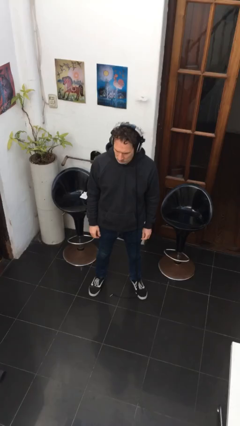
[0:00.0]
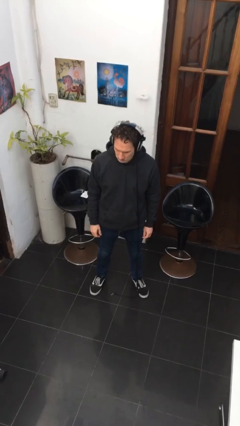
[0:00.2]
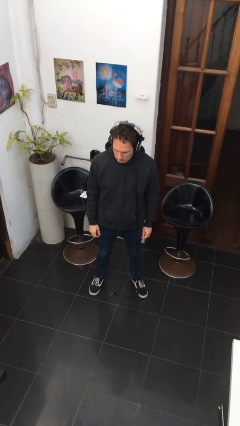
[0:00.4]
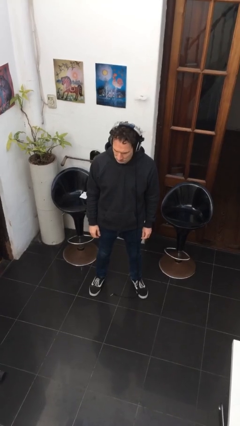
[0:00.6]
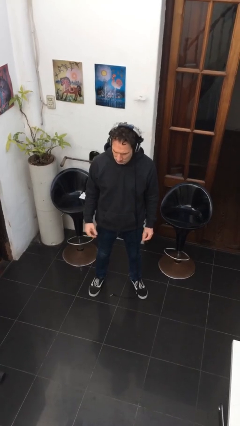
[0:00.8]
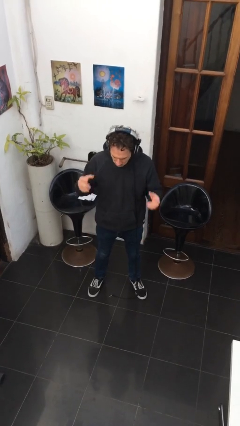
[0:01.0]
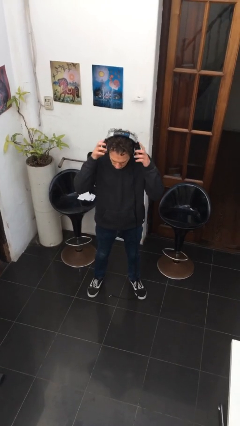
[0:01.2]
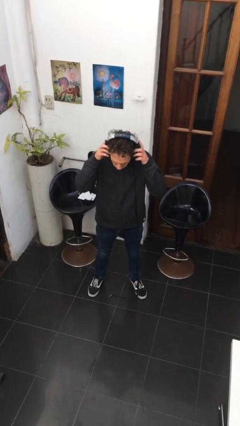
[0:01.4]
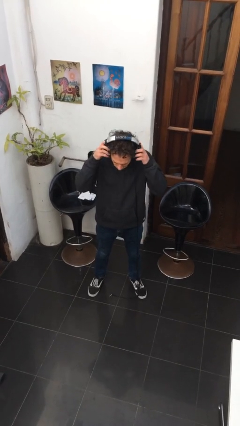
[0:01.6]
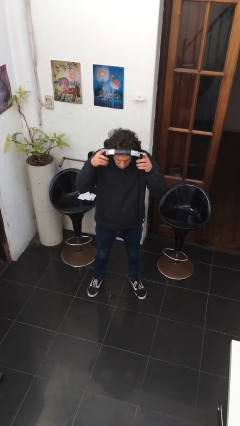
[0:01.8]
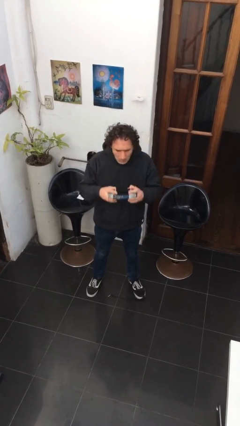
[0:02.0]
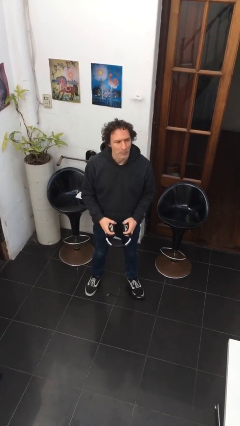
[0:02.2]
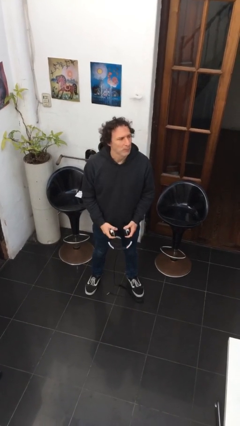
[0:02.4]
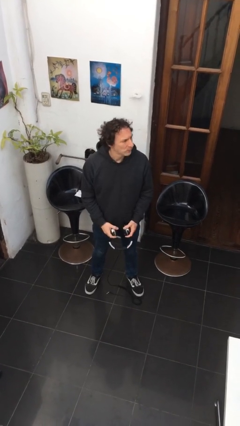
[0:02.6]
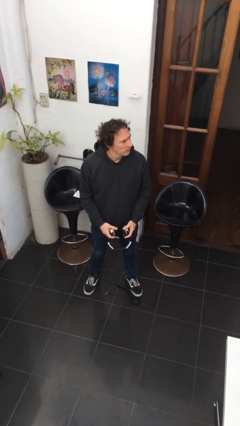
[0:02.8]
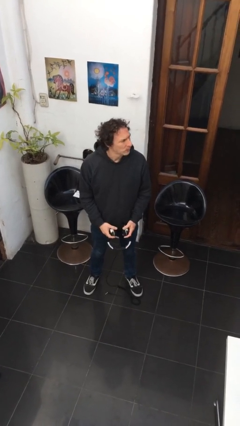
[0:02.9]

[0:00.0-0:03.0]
person takes off headphones

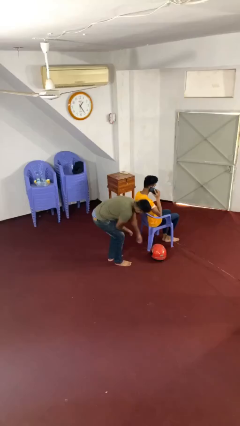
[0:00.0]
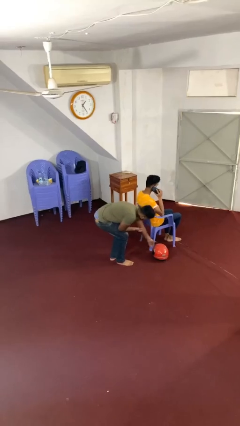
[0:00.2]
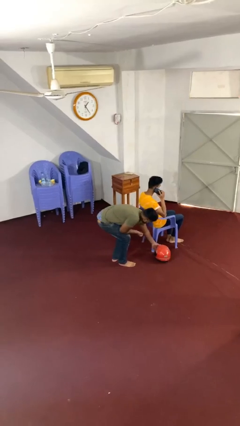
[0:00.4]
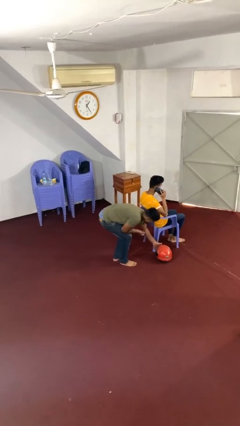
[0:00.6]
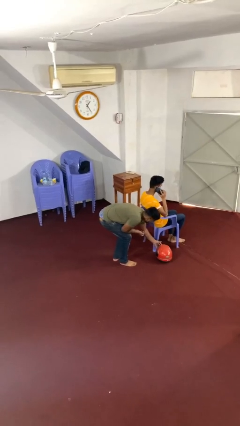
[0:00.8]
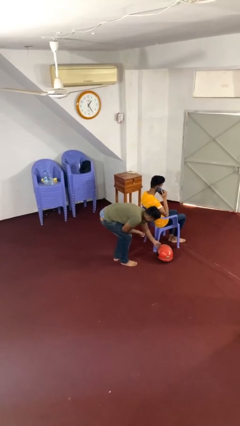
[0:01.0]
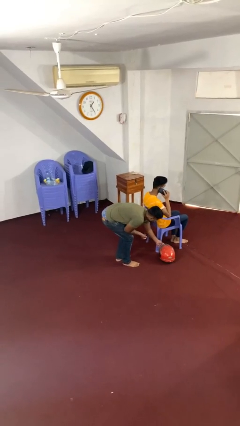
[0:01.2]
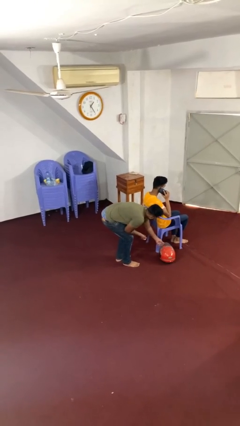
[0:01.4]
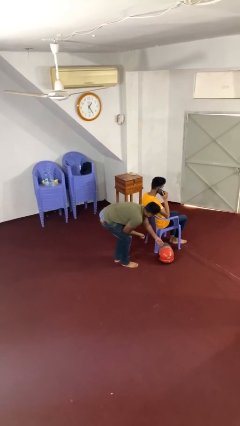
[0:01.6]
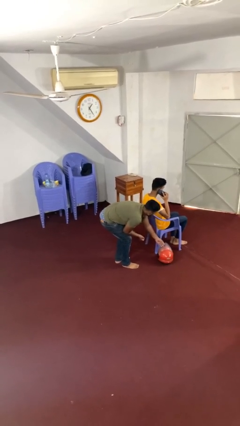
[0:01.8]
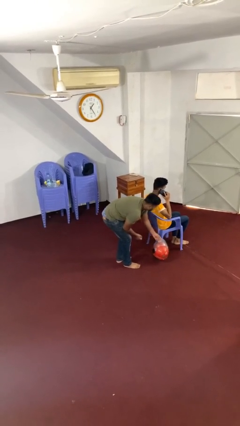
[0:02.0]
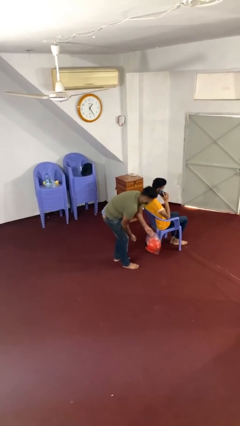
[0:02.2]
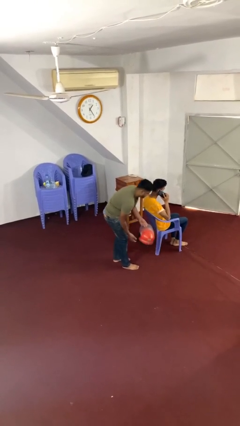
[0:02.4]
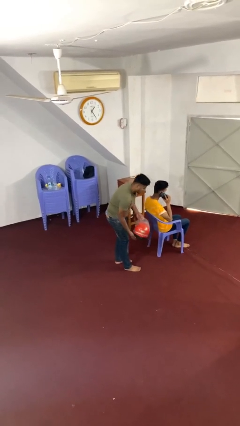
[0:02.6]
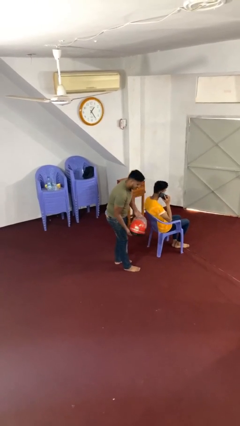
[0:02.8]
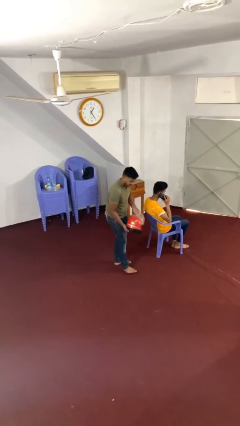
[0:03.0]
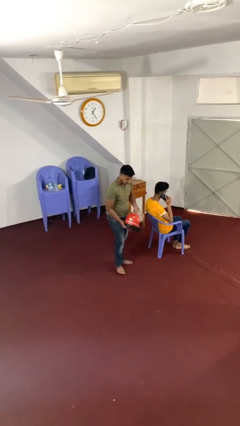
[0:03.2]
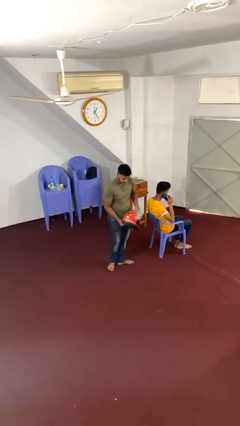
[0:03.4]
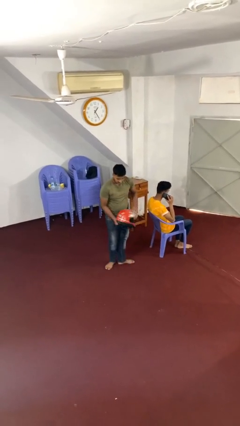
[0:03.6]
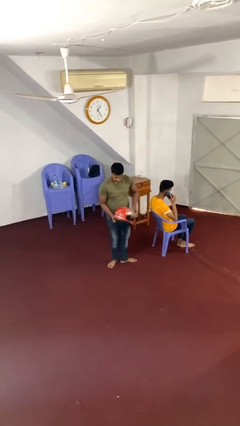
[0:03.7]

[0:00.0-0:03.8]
person steals object from person

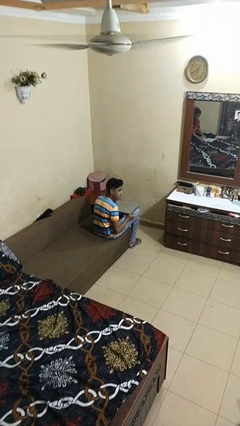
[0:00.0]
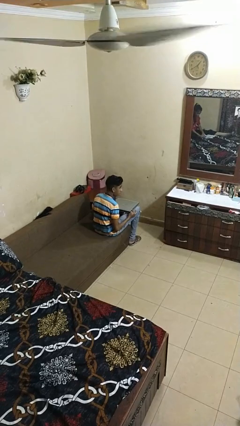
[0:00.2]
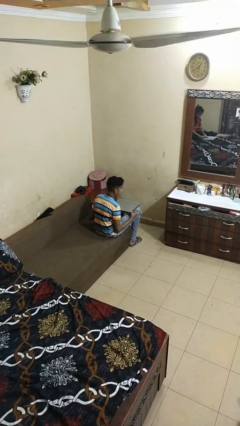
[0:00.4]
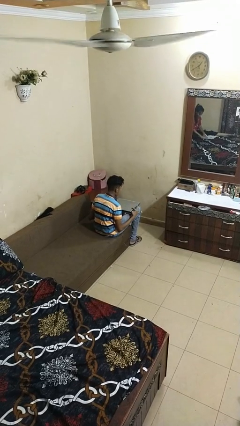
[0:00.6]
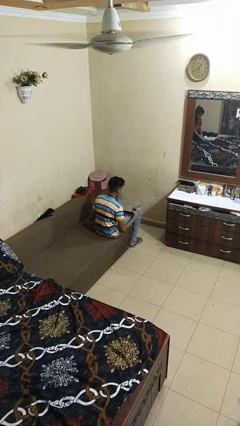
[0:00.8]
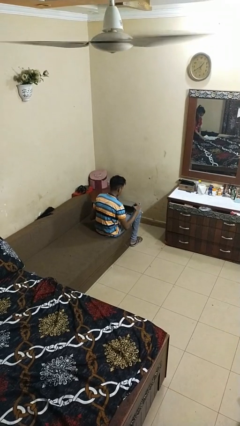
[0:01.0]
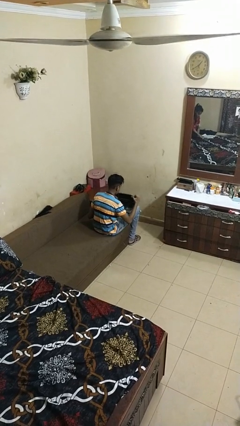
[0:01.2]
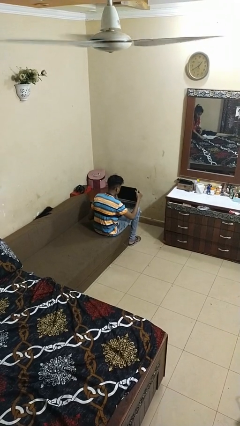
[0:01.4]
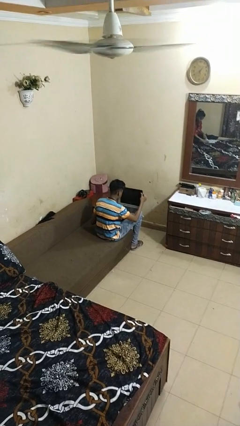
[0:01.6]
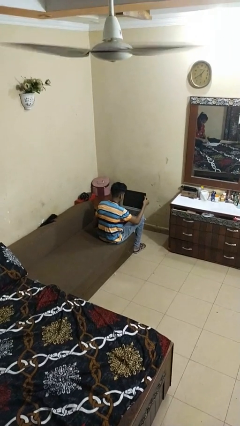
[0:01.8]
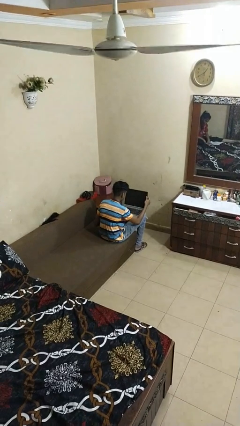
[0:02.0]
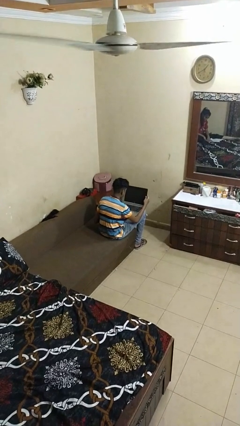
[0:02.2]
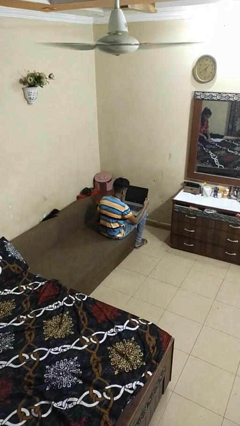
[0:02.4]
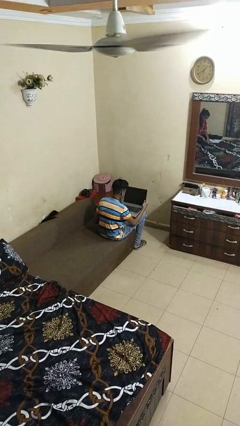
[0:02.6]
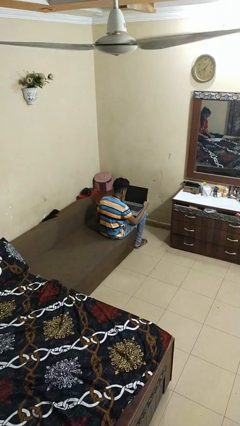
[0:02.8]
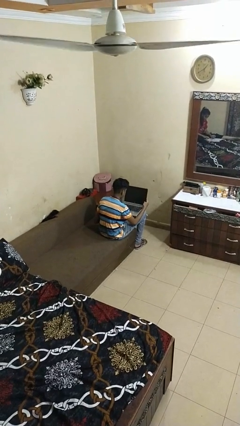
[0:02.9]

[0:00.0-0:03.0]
person opens laptop

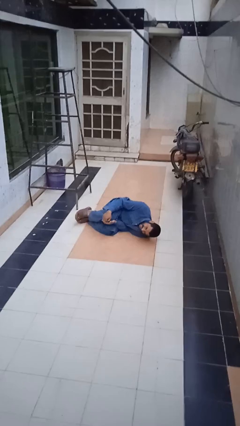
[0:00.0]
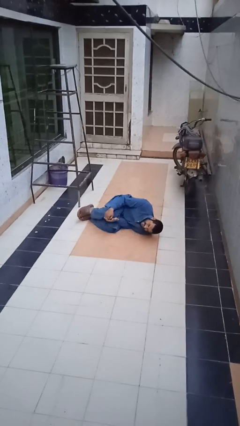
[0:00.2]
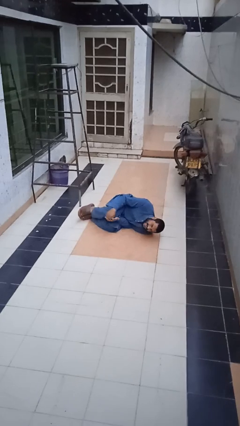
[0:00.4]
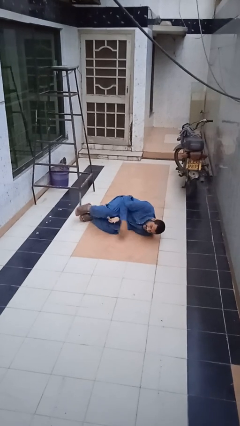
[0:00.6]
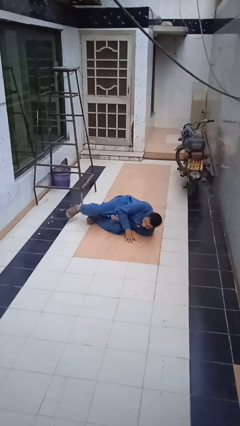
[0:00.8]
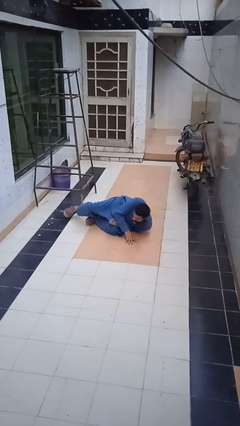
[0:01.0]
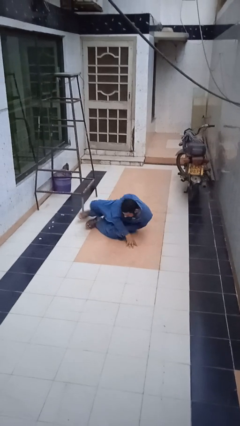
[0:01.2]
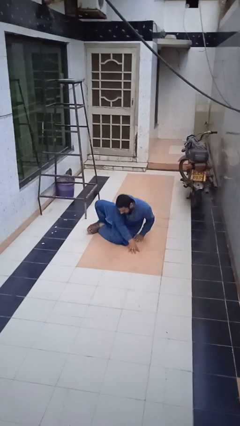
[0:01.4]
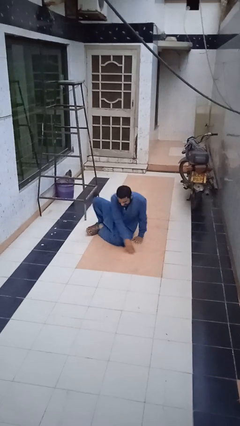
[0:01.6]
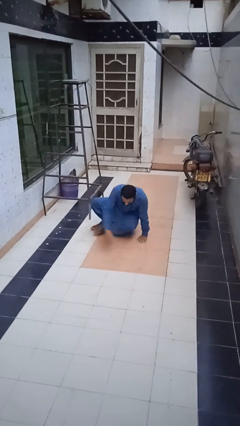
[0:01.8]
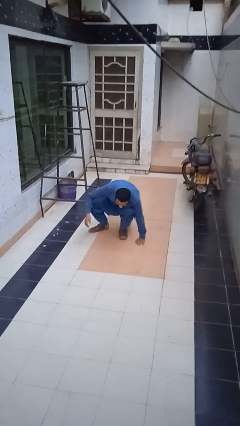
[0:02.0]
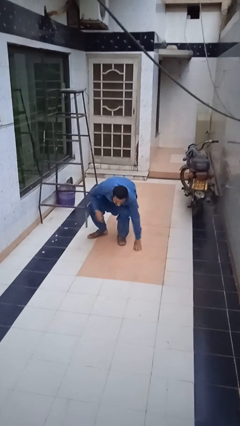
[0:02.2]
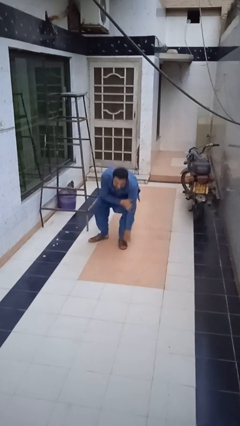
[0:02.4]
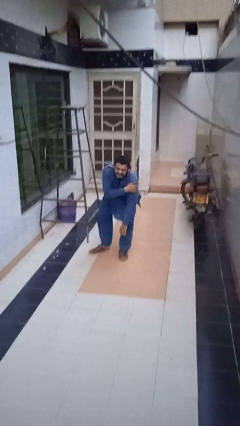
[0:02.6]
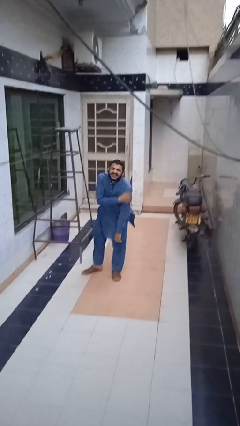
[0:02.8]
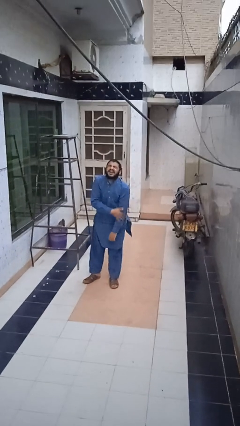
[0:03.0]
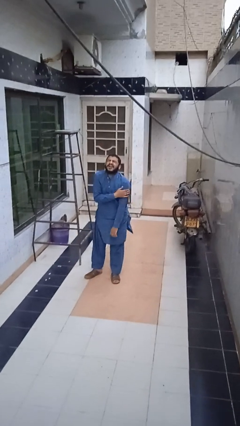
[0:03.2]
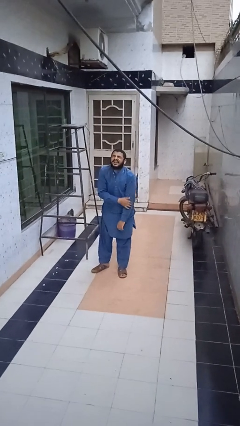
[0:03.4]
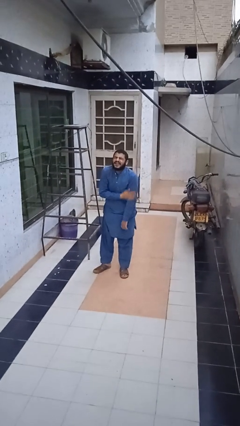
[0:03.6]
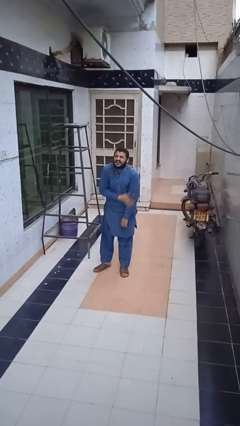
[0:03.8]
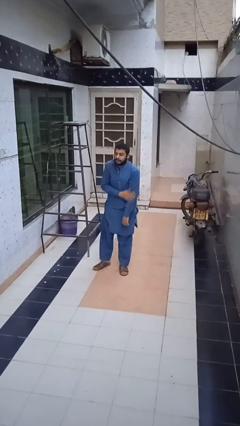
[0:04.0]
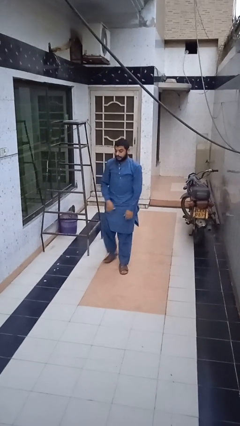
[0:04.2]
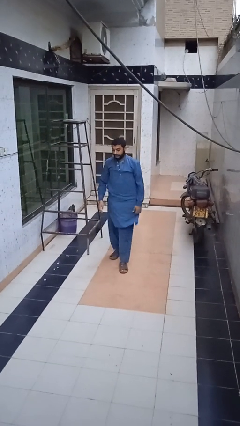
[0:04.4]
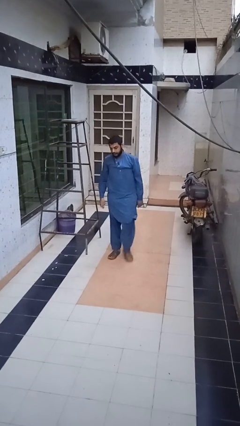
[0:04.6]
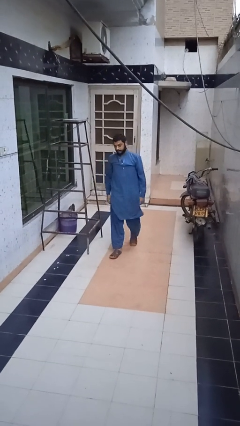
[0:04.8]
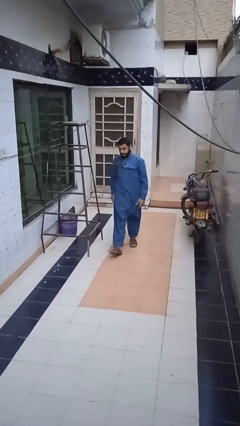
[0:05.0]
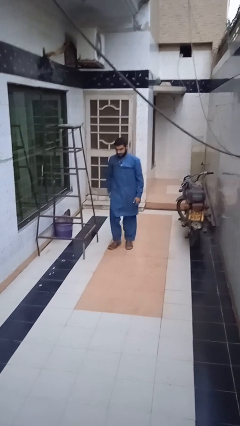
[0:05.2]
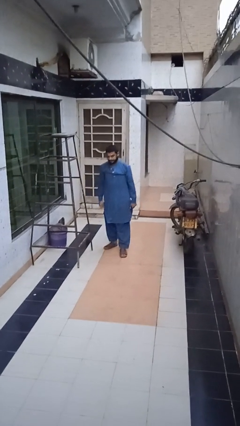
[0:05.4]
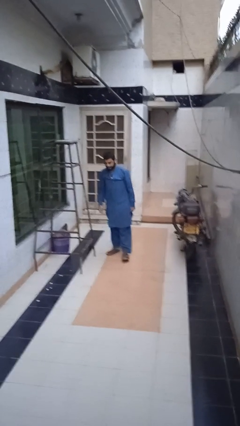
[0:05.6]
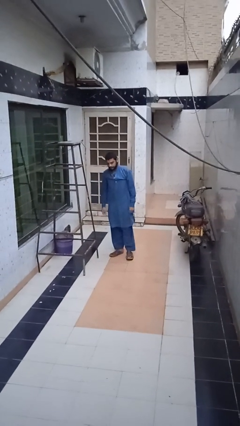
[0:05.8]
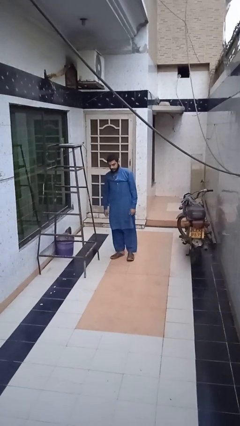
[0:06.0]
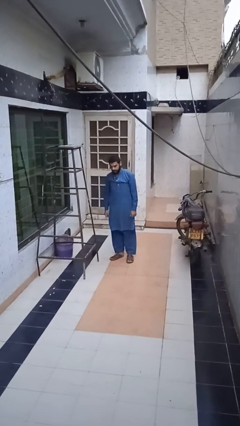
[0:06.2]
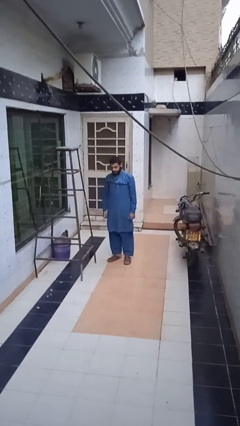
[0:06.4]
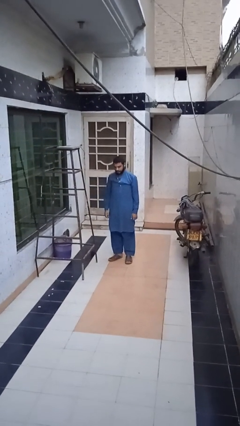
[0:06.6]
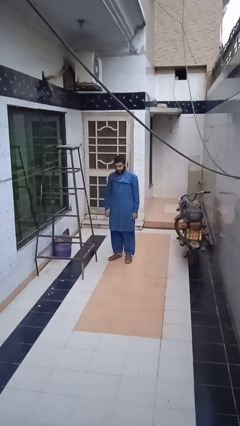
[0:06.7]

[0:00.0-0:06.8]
person stands up from floor

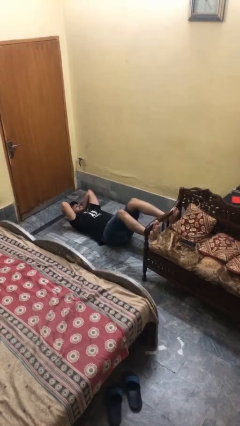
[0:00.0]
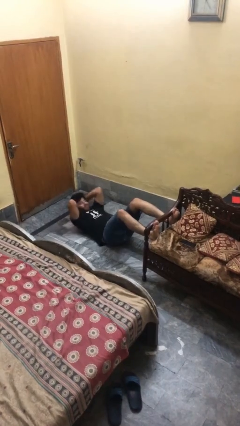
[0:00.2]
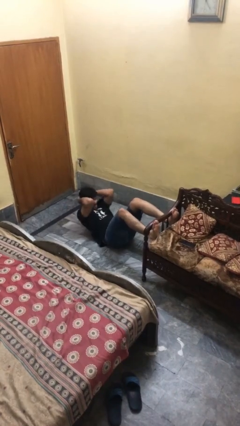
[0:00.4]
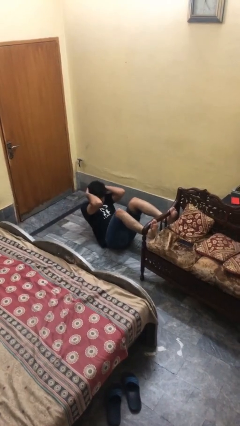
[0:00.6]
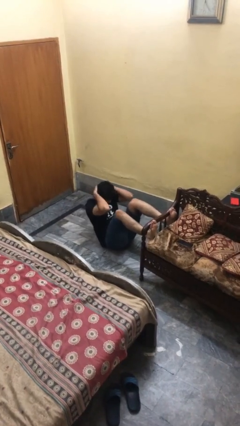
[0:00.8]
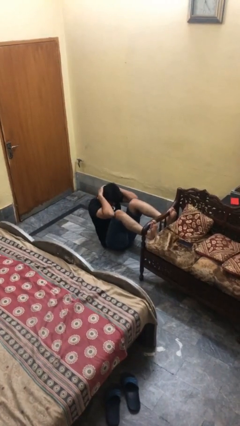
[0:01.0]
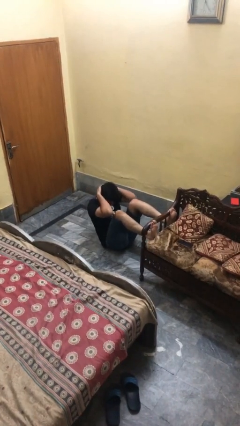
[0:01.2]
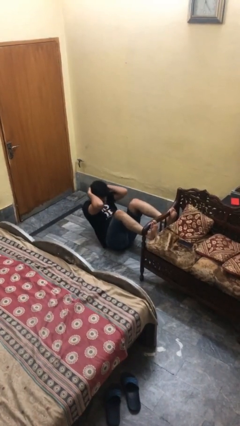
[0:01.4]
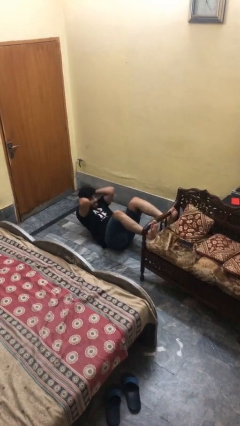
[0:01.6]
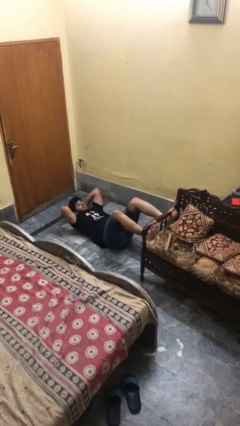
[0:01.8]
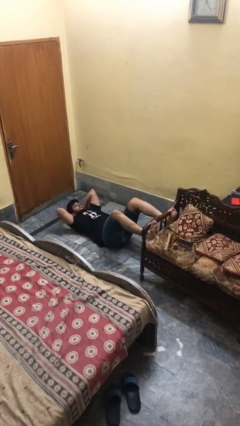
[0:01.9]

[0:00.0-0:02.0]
person exercises with situp
